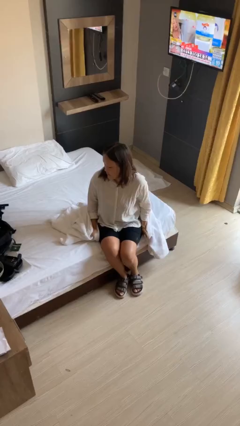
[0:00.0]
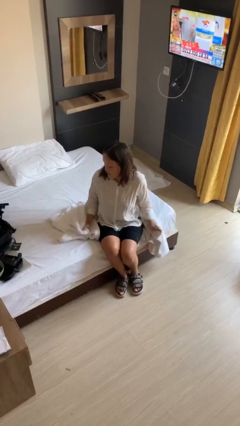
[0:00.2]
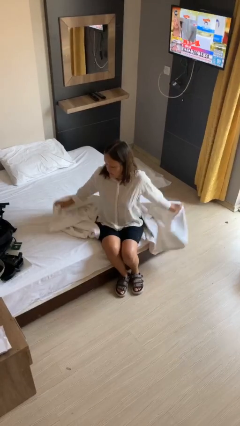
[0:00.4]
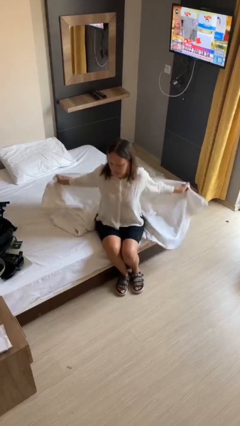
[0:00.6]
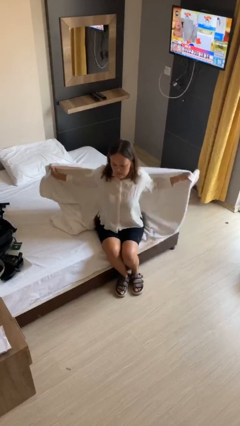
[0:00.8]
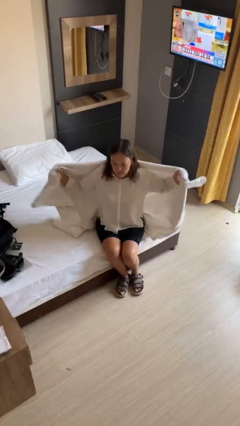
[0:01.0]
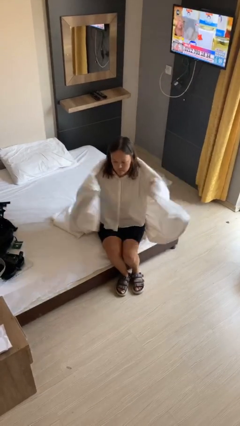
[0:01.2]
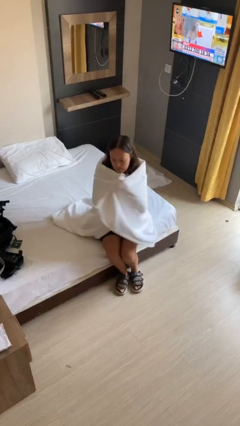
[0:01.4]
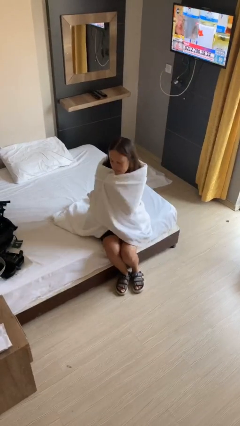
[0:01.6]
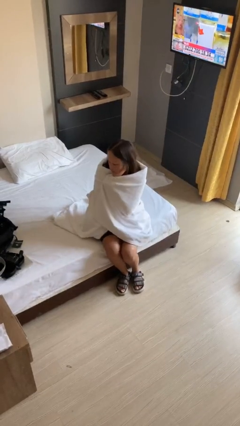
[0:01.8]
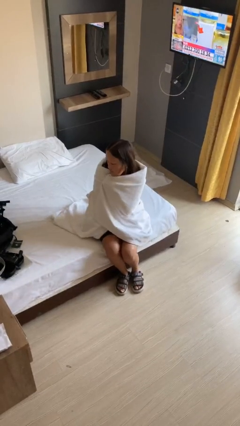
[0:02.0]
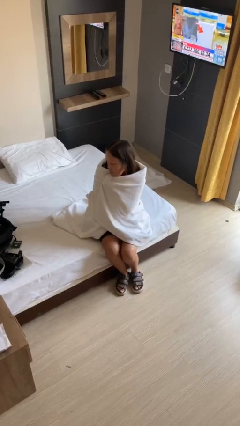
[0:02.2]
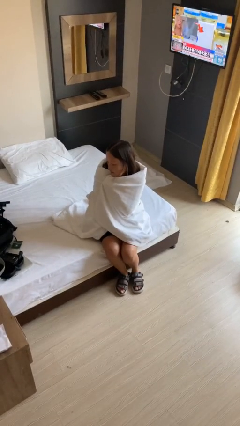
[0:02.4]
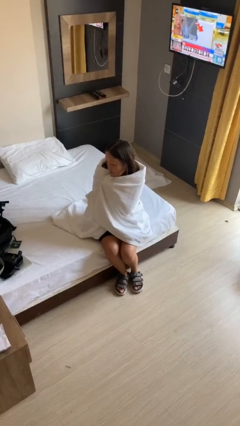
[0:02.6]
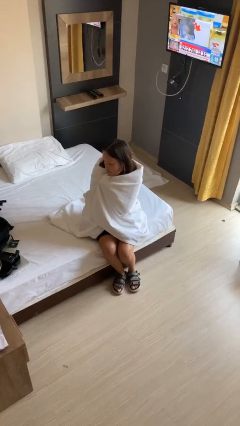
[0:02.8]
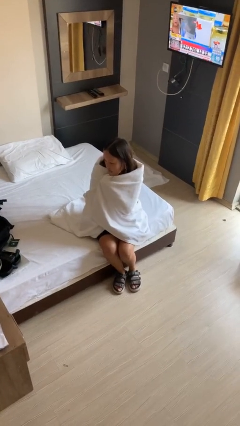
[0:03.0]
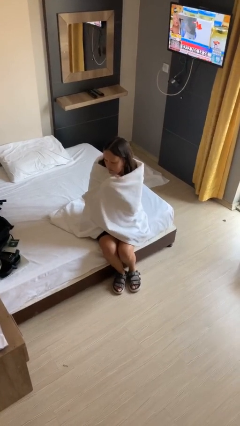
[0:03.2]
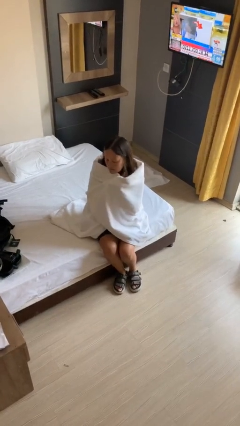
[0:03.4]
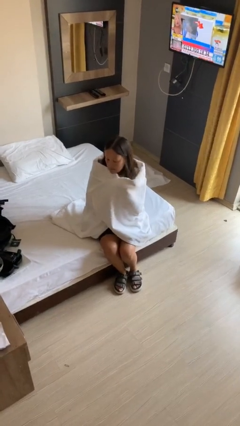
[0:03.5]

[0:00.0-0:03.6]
person covers with blanket

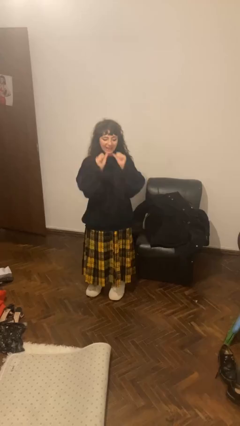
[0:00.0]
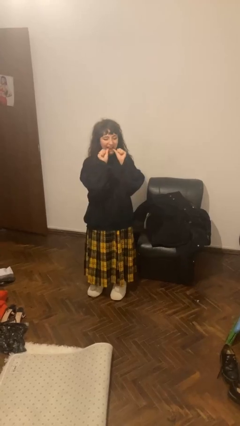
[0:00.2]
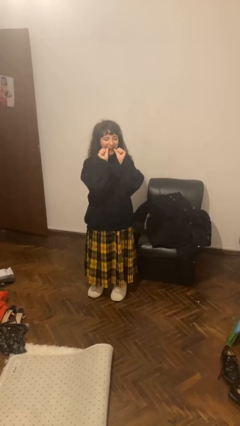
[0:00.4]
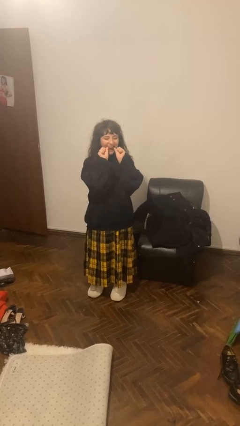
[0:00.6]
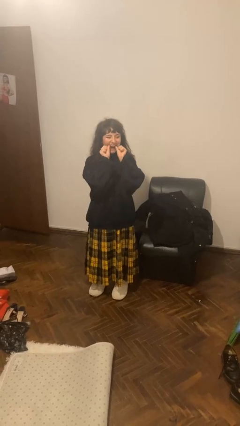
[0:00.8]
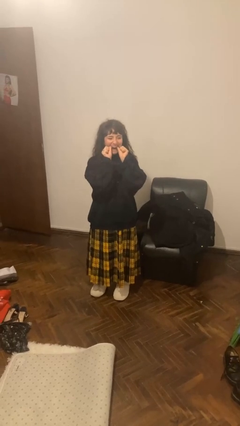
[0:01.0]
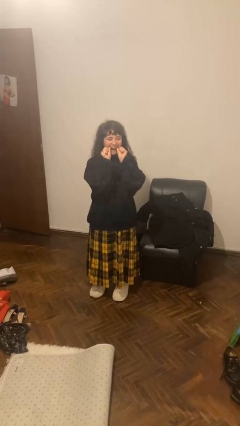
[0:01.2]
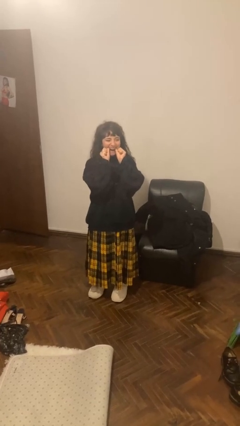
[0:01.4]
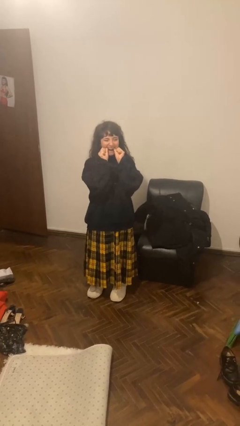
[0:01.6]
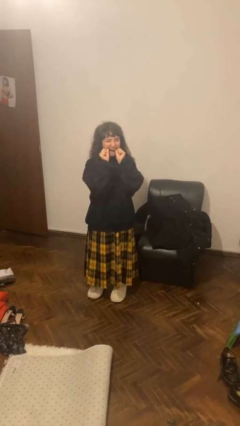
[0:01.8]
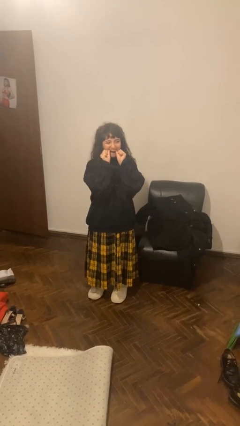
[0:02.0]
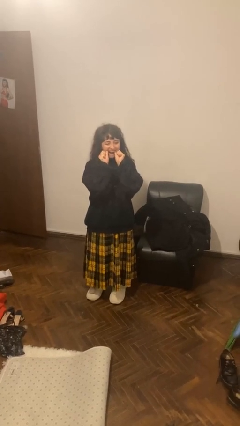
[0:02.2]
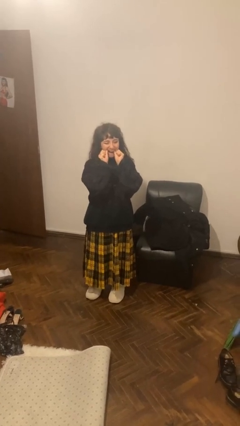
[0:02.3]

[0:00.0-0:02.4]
person flosses

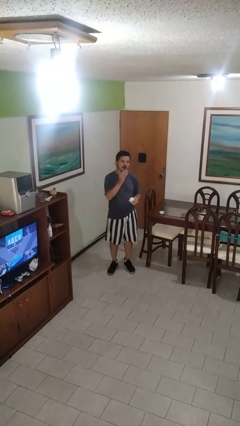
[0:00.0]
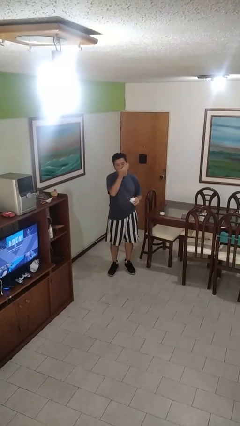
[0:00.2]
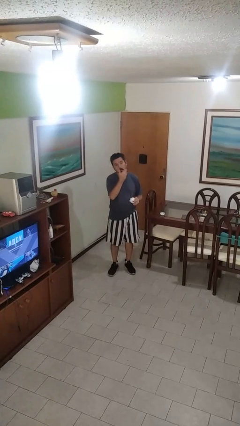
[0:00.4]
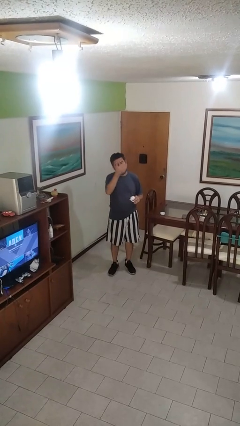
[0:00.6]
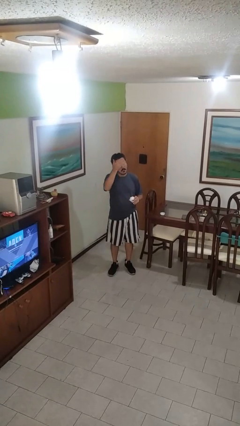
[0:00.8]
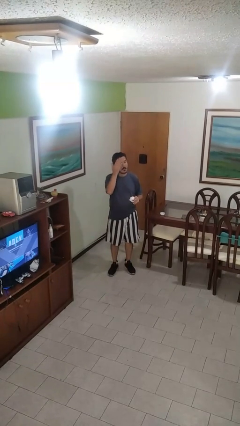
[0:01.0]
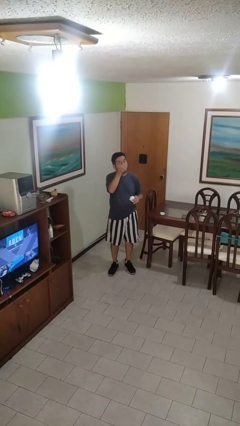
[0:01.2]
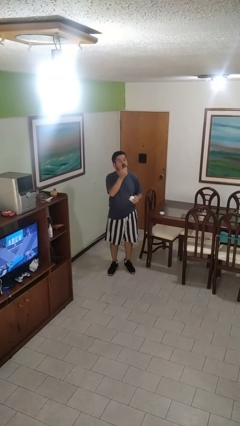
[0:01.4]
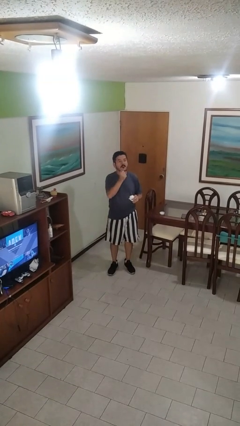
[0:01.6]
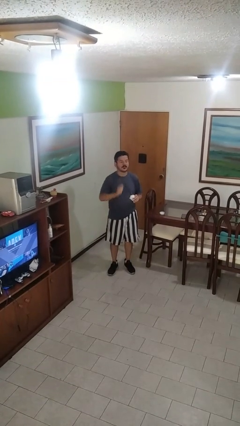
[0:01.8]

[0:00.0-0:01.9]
person applies facial moisturizer

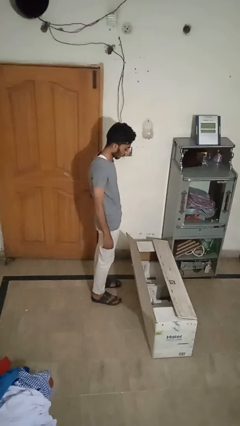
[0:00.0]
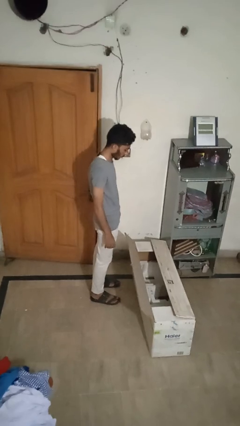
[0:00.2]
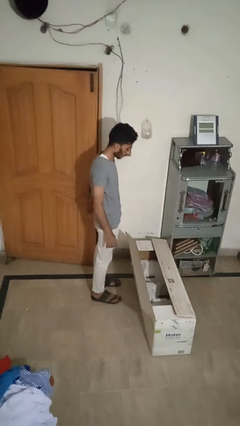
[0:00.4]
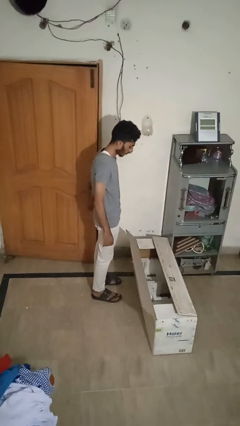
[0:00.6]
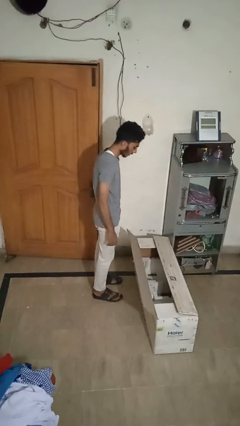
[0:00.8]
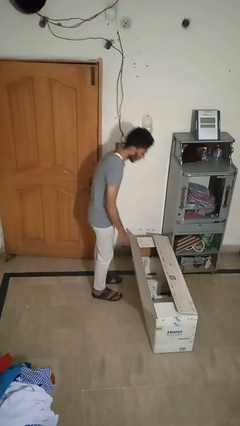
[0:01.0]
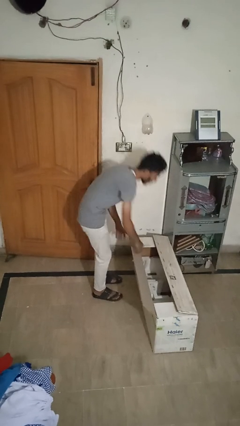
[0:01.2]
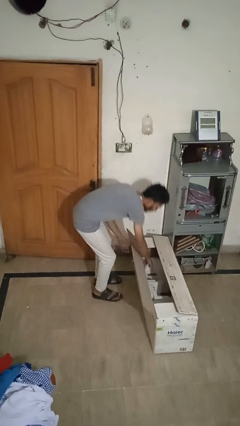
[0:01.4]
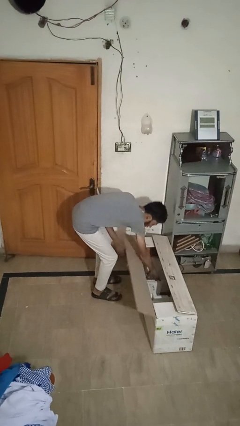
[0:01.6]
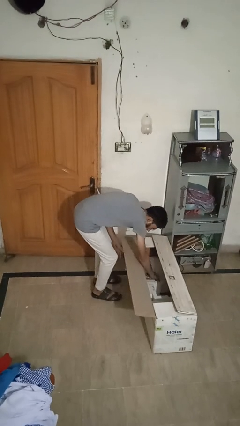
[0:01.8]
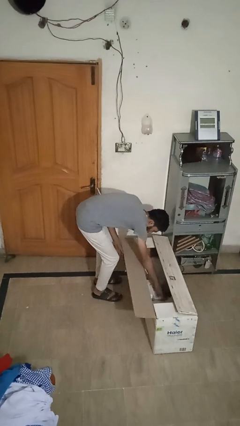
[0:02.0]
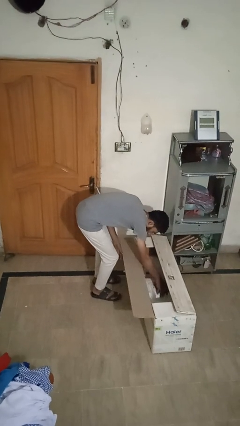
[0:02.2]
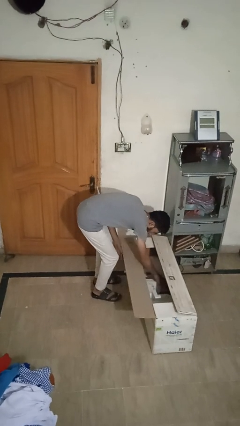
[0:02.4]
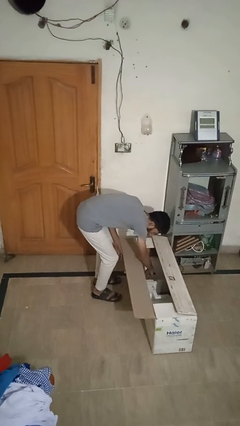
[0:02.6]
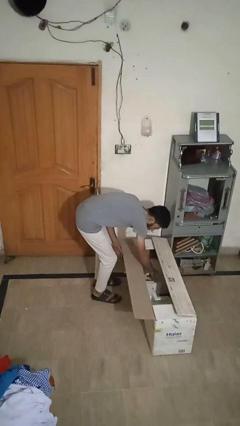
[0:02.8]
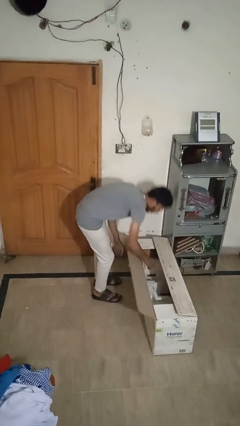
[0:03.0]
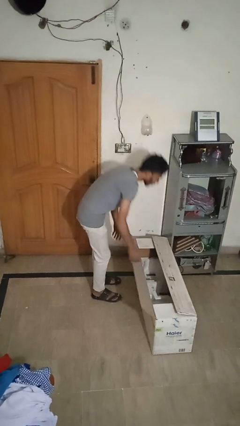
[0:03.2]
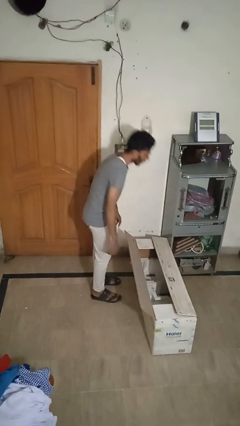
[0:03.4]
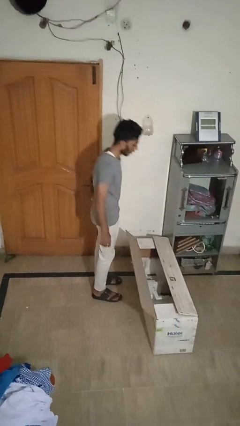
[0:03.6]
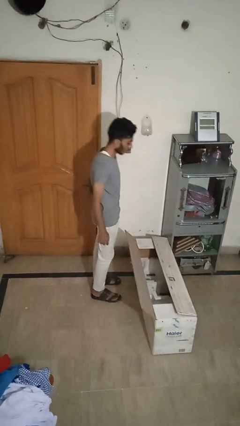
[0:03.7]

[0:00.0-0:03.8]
person searches in box

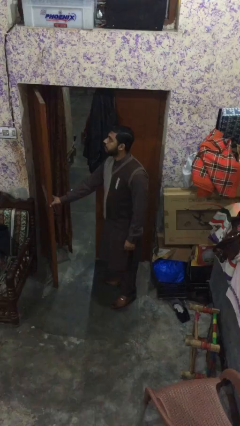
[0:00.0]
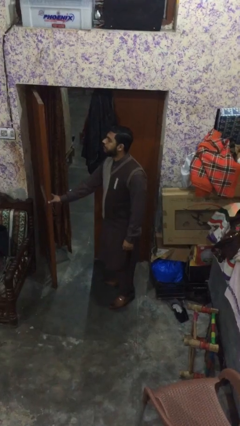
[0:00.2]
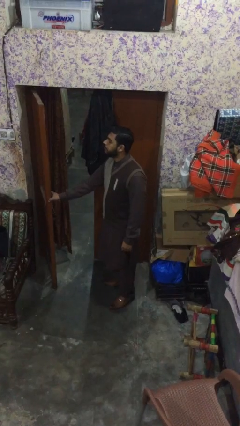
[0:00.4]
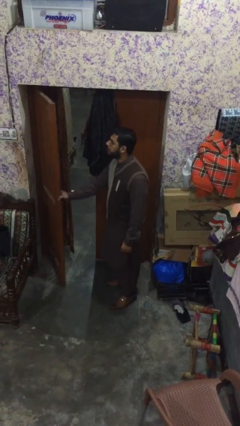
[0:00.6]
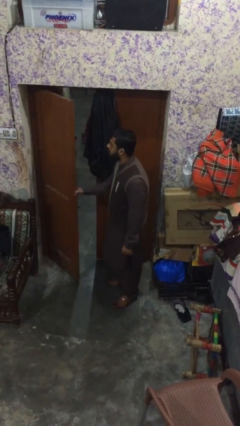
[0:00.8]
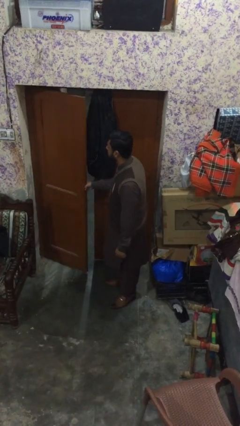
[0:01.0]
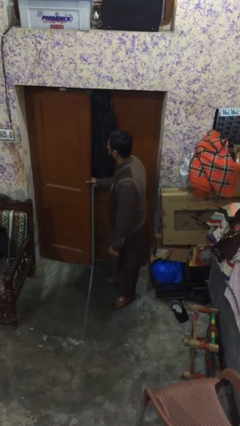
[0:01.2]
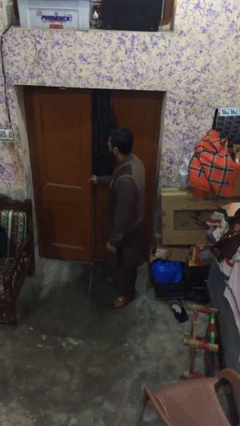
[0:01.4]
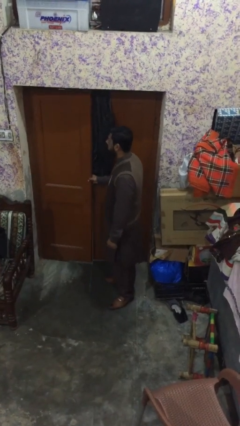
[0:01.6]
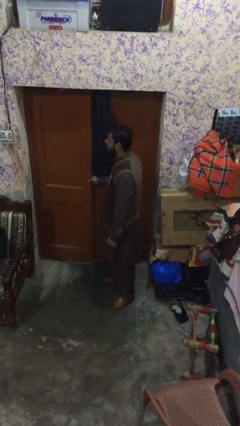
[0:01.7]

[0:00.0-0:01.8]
person closes facility door

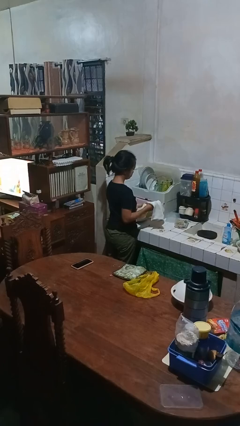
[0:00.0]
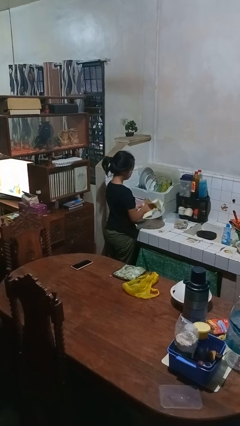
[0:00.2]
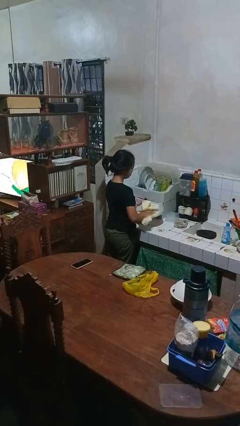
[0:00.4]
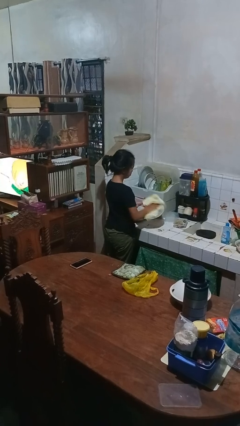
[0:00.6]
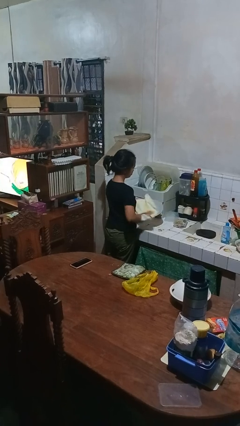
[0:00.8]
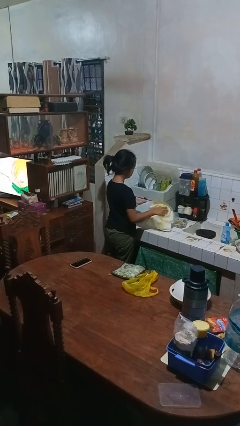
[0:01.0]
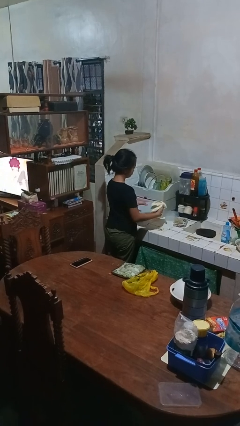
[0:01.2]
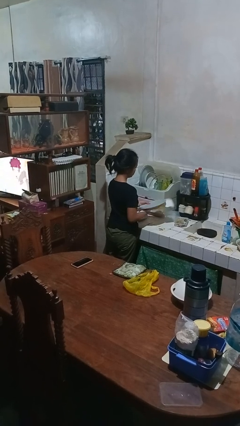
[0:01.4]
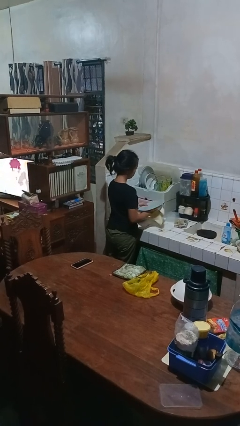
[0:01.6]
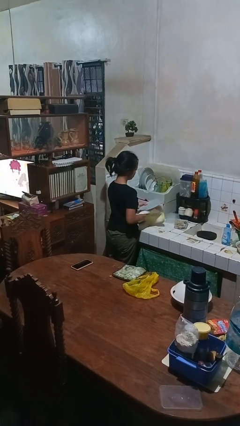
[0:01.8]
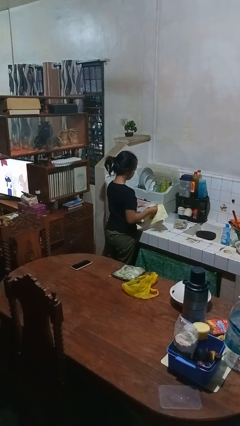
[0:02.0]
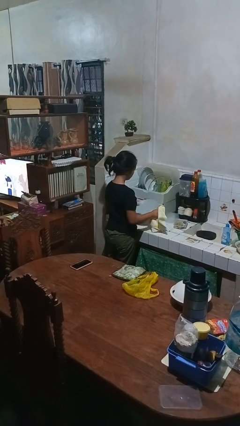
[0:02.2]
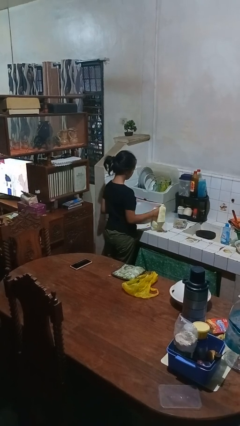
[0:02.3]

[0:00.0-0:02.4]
person dries dish

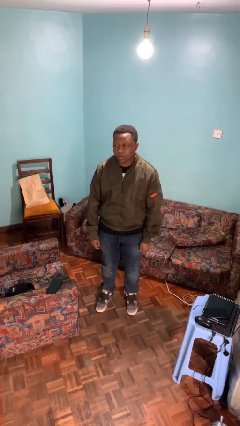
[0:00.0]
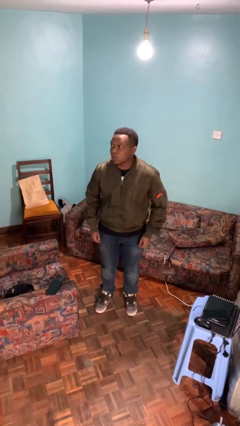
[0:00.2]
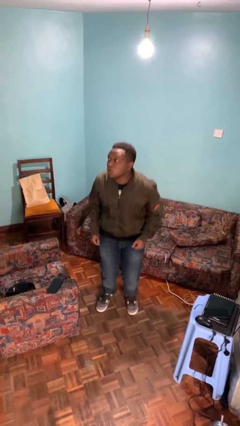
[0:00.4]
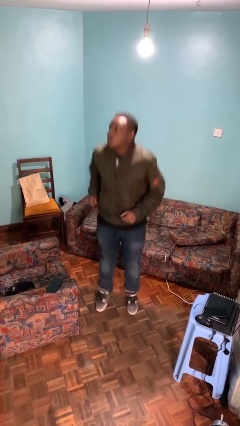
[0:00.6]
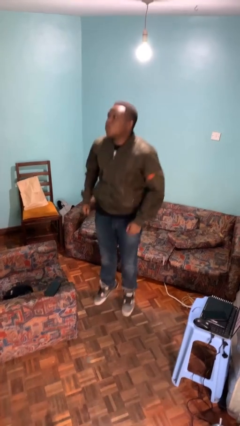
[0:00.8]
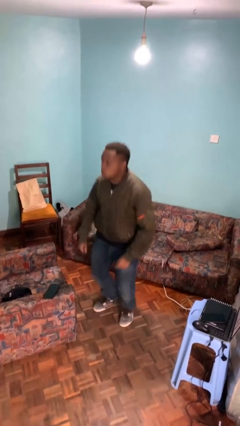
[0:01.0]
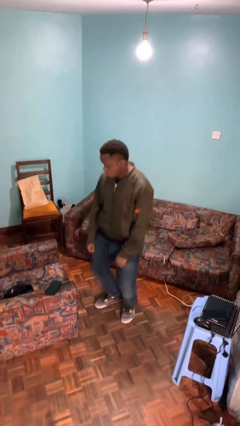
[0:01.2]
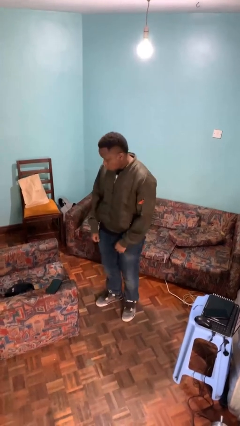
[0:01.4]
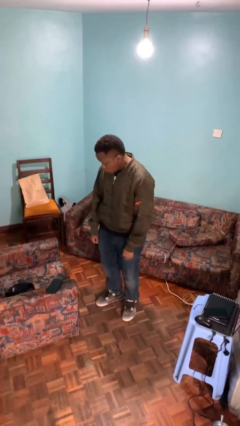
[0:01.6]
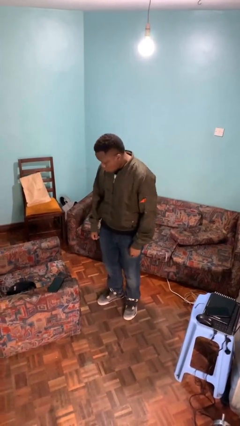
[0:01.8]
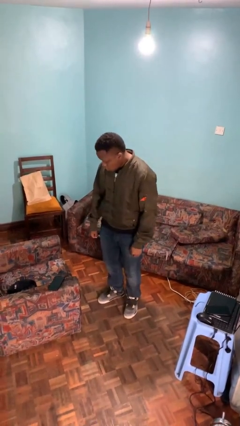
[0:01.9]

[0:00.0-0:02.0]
person jumps
